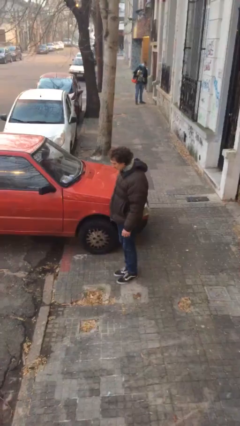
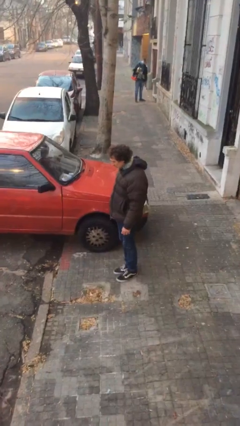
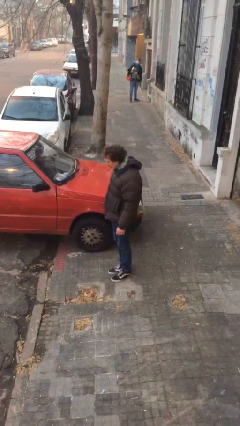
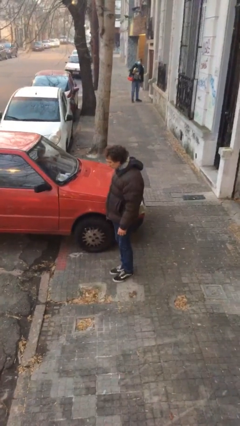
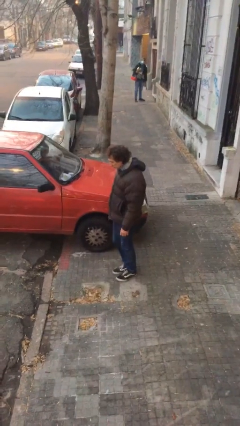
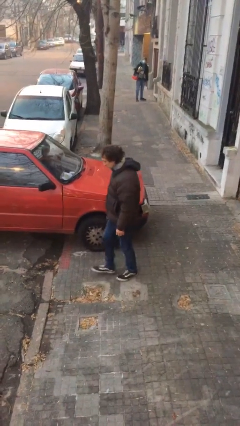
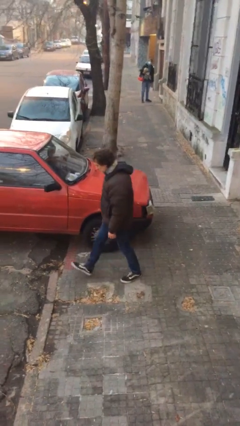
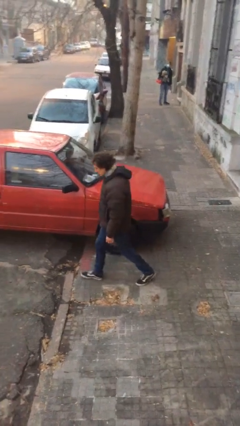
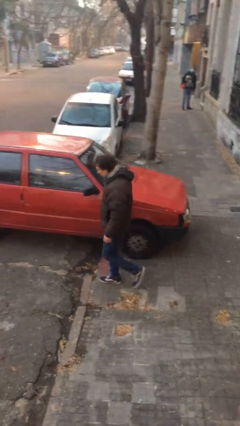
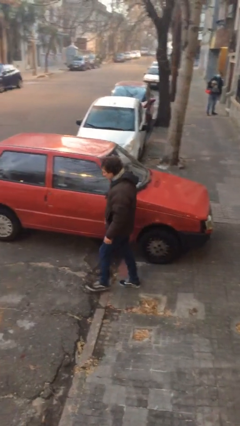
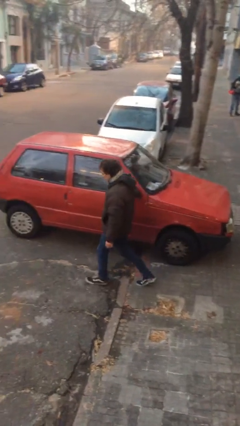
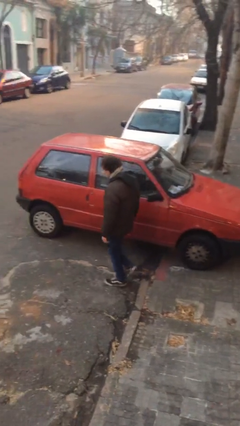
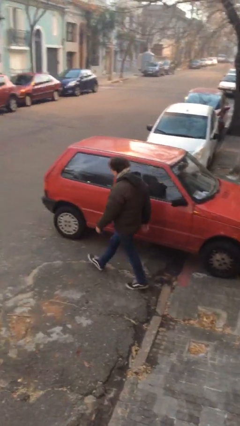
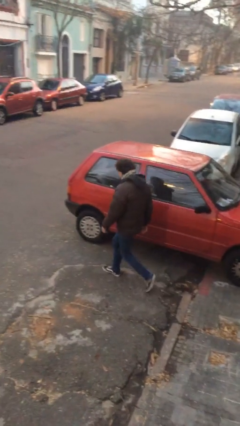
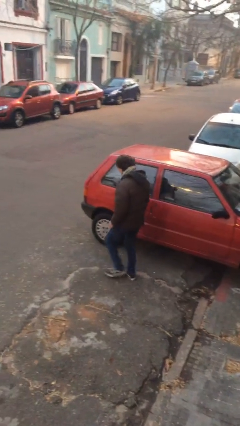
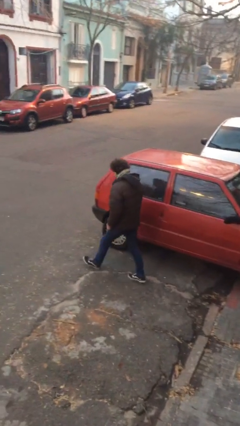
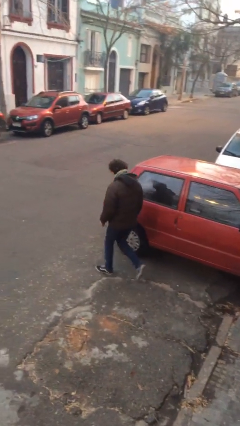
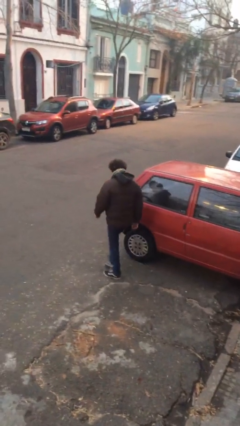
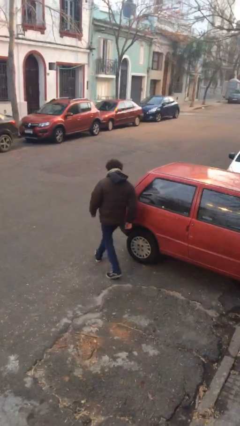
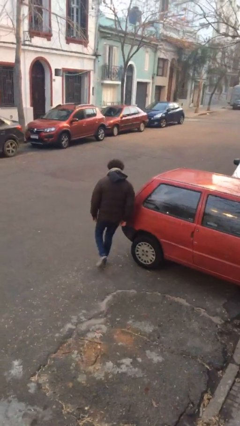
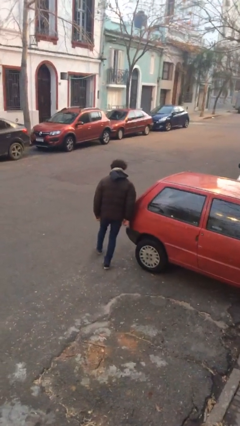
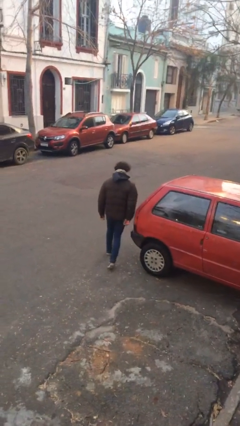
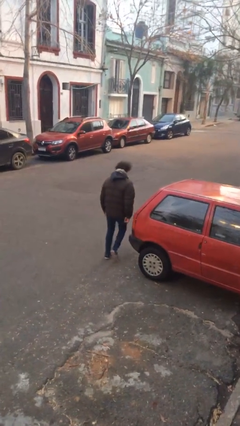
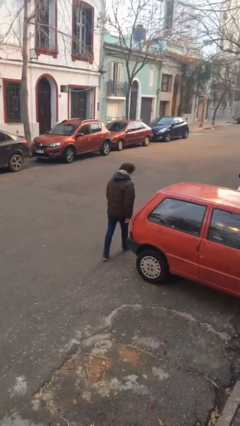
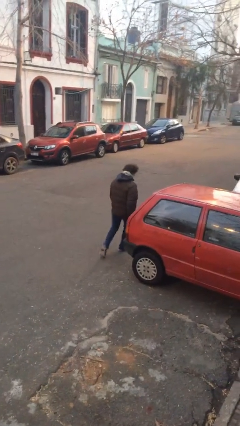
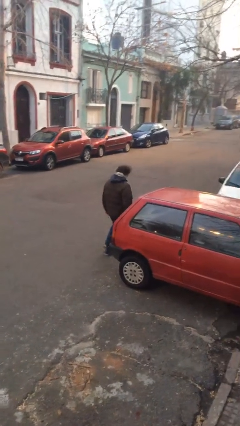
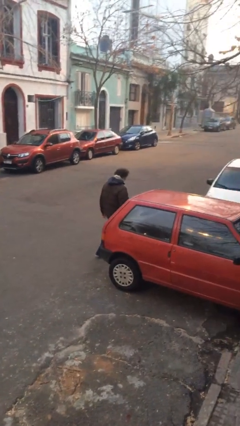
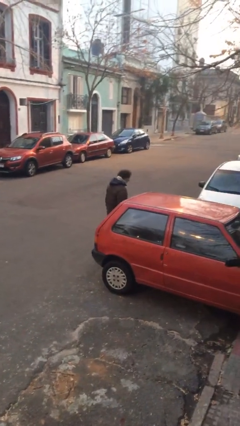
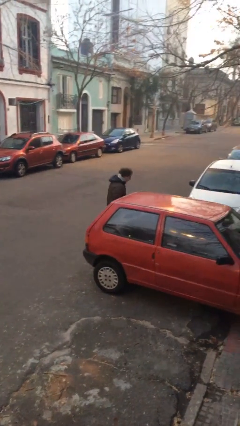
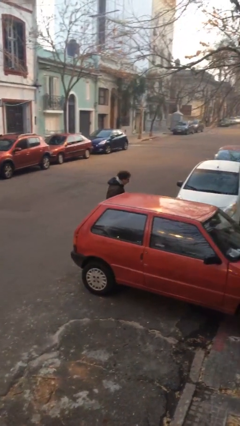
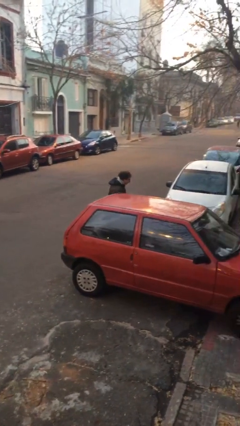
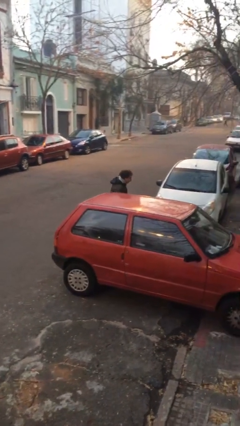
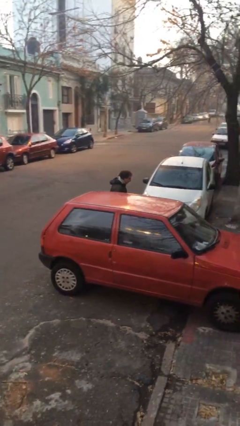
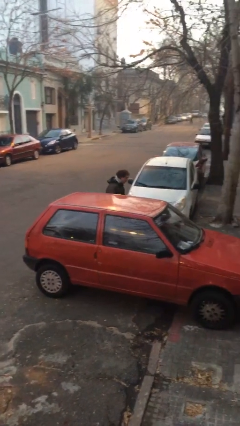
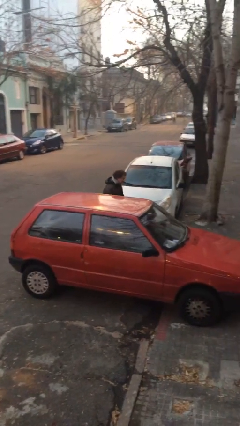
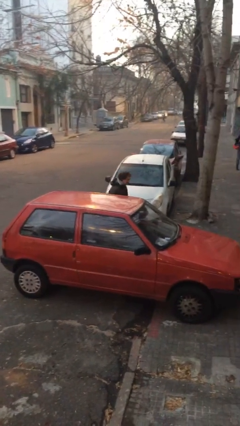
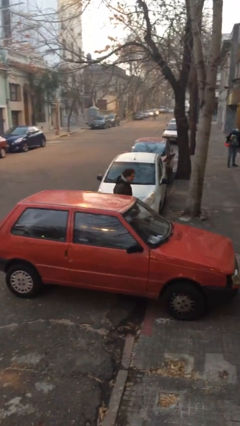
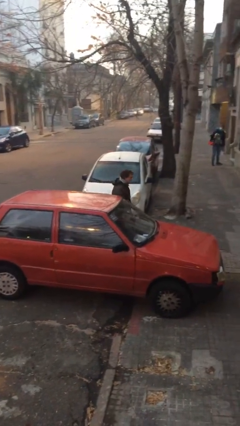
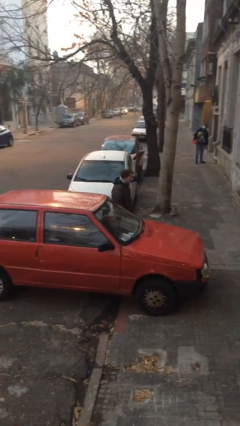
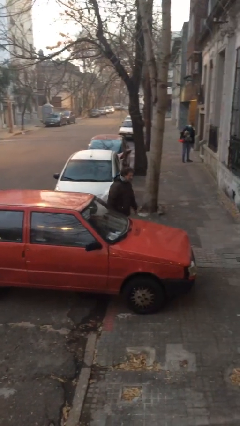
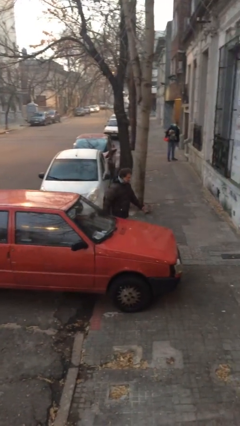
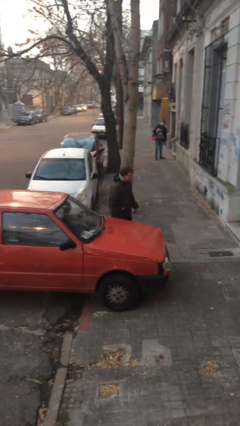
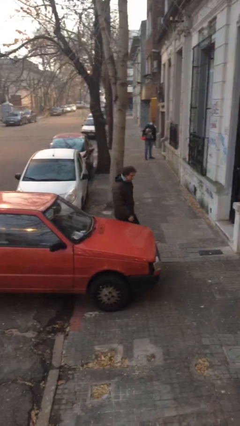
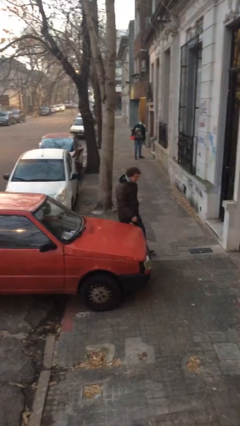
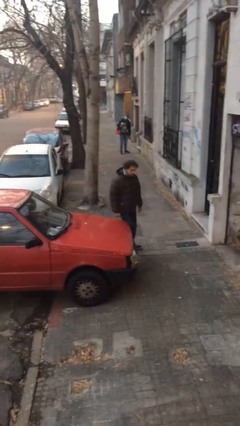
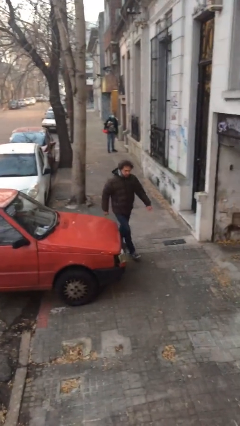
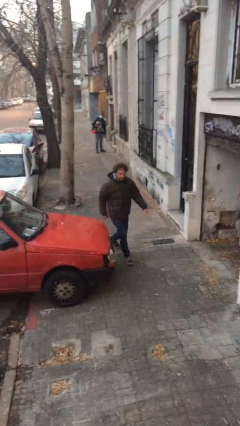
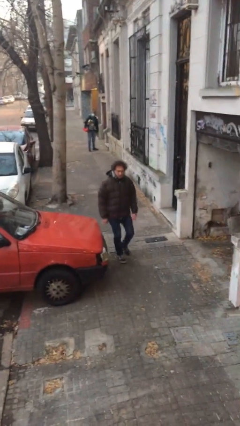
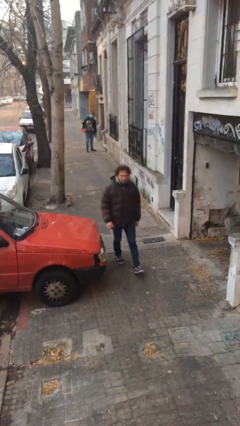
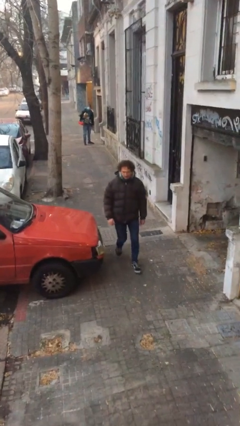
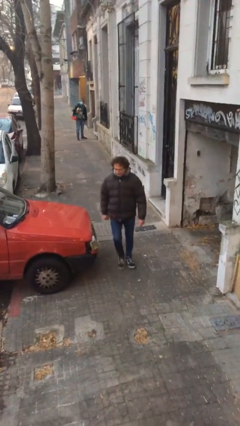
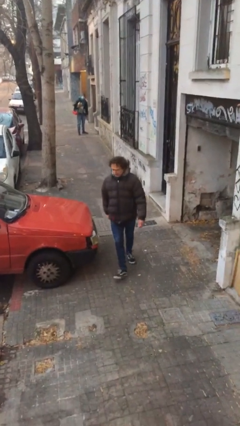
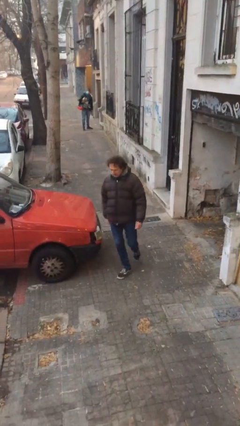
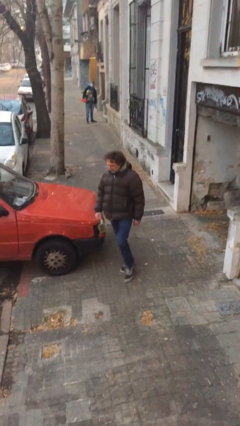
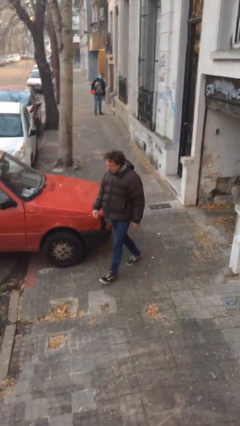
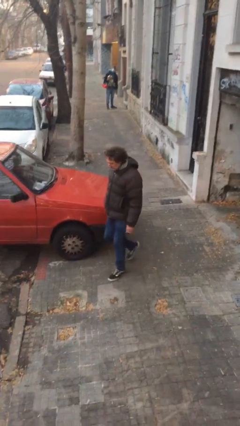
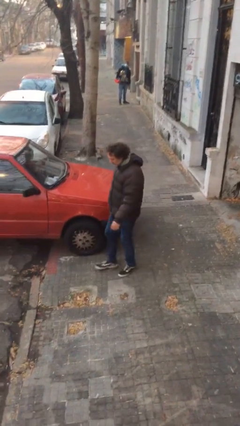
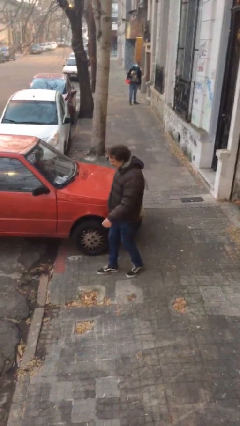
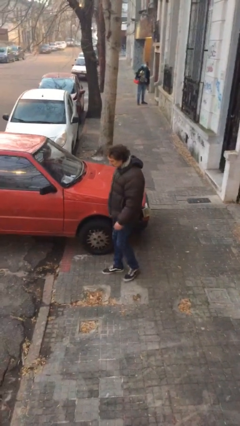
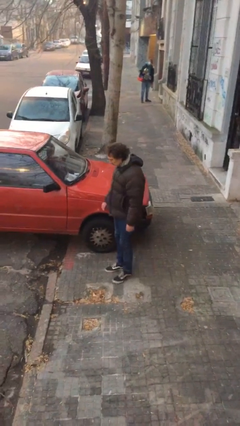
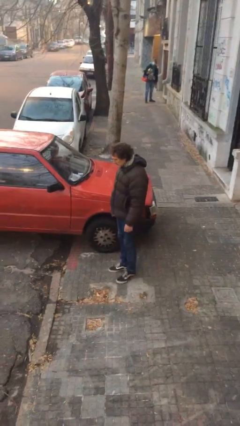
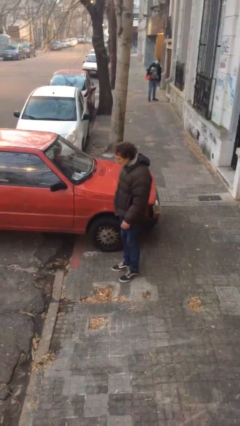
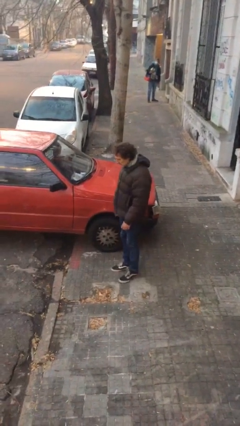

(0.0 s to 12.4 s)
person walks around car

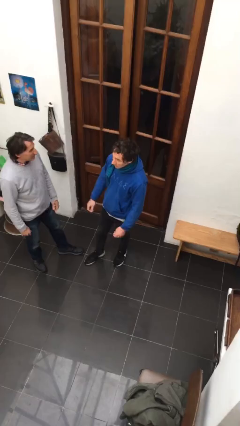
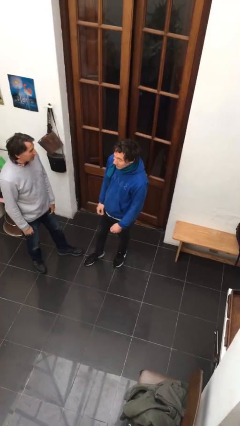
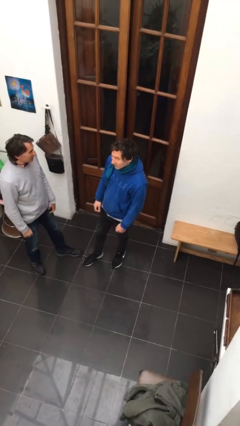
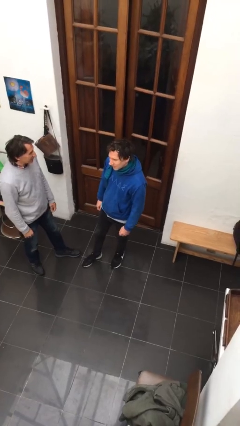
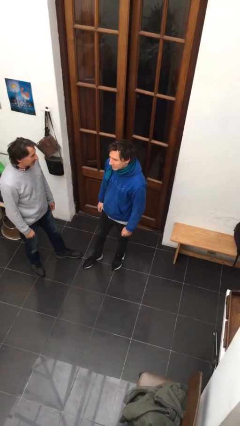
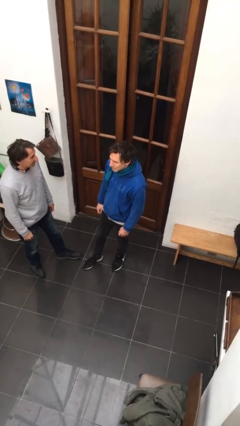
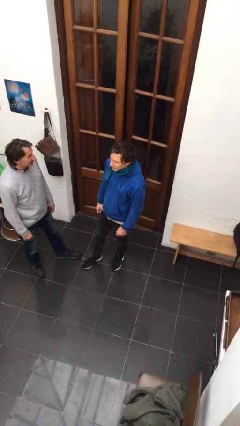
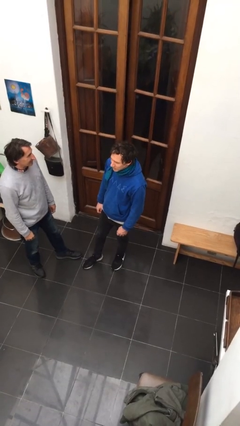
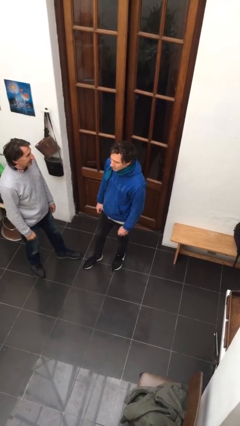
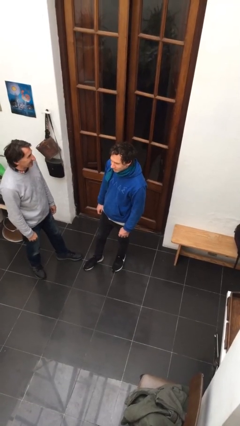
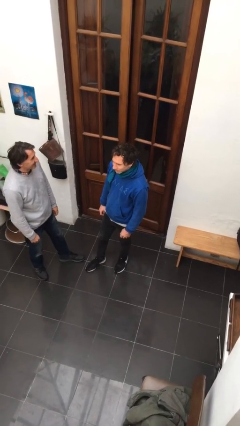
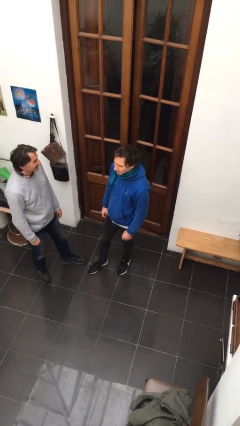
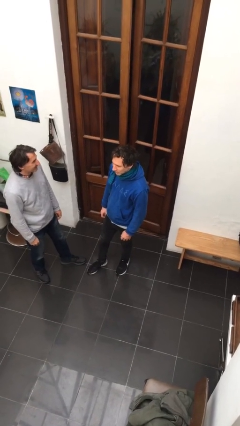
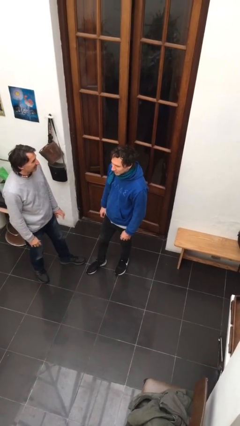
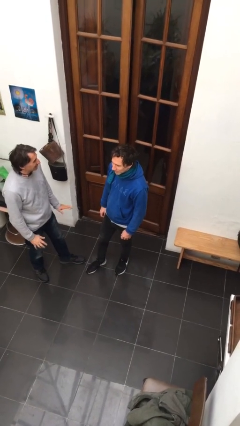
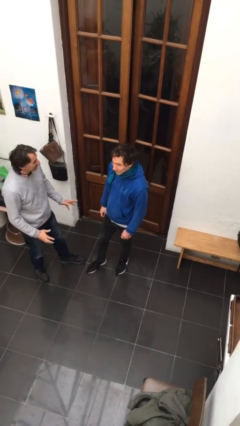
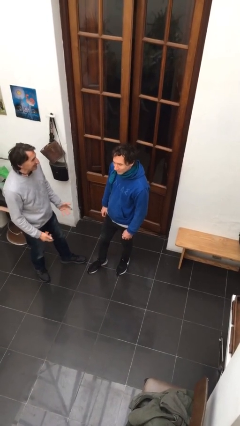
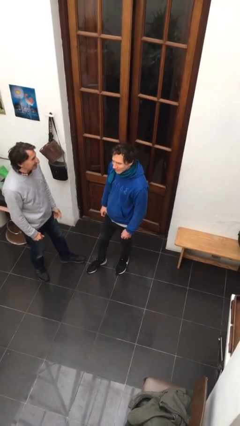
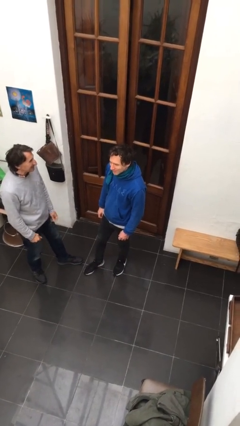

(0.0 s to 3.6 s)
person talks to person

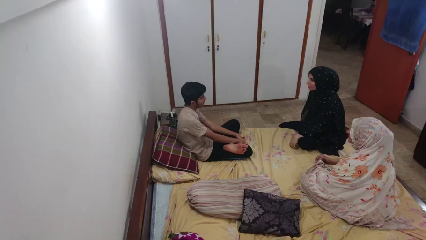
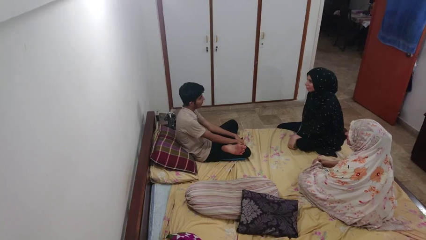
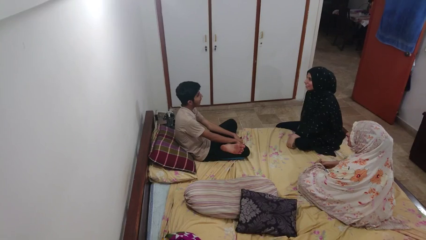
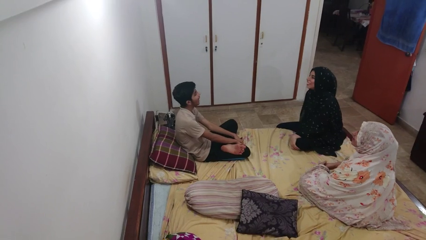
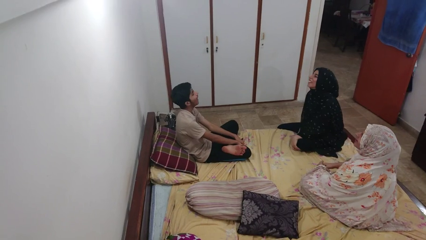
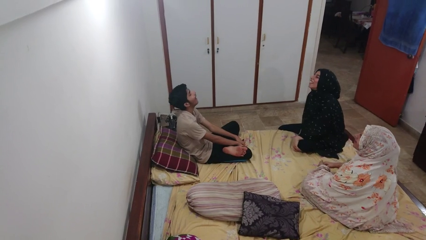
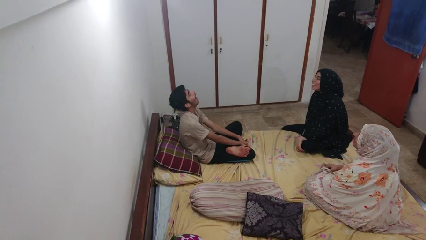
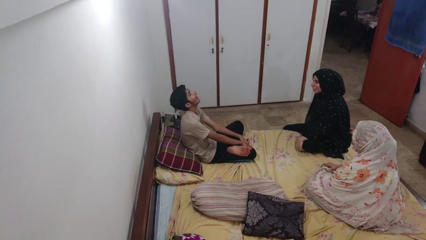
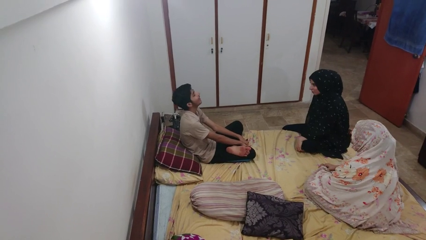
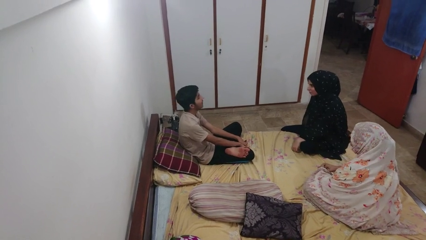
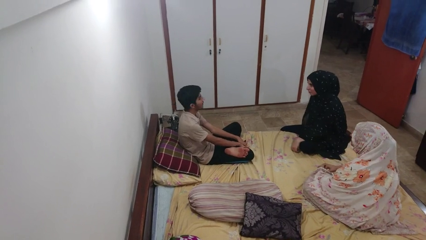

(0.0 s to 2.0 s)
person laughs with person
